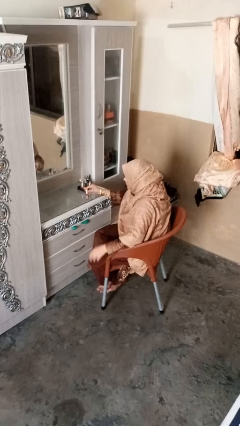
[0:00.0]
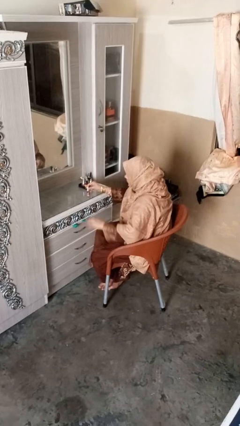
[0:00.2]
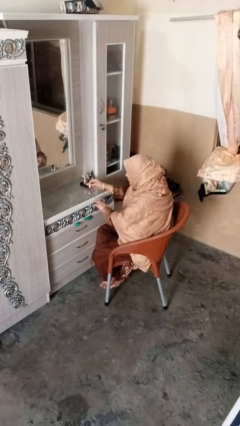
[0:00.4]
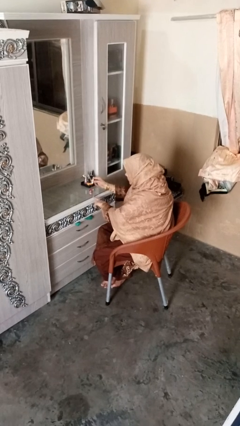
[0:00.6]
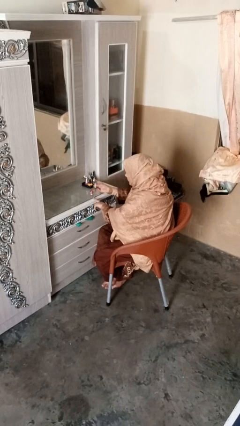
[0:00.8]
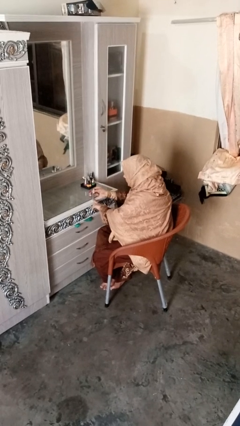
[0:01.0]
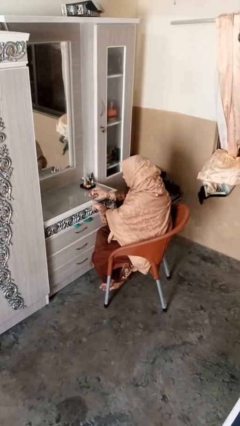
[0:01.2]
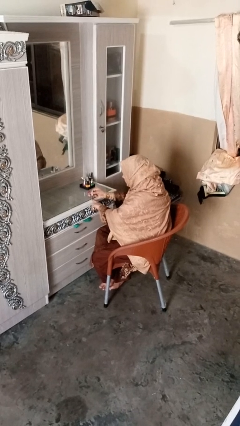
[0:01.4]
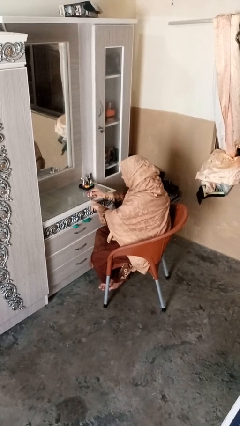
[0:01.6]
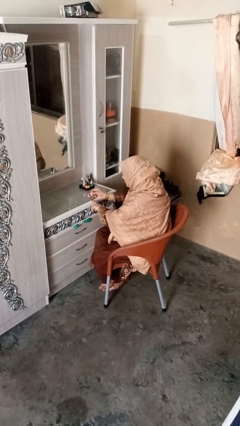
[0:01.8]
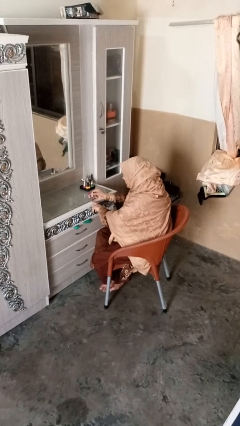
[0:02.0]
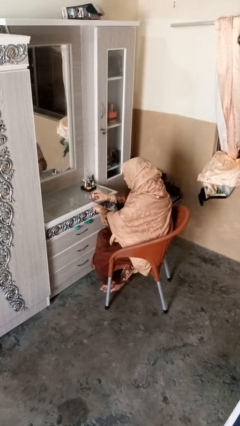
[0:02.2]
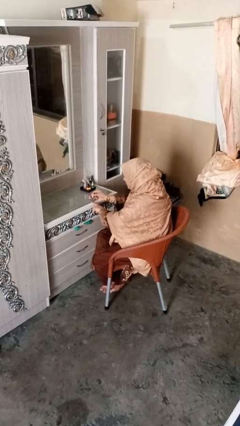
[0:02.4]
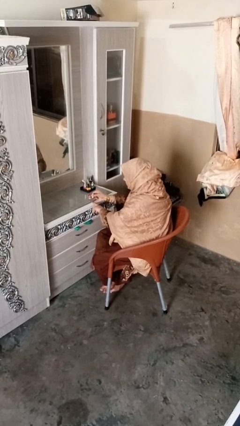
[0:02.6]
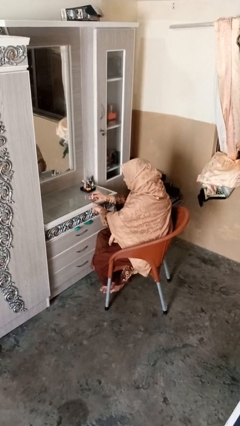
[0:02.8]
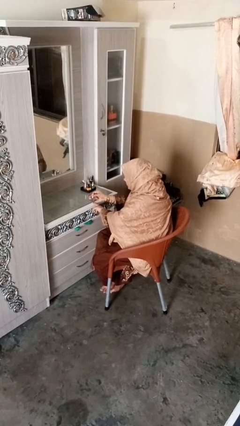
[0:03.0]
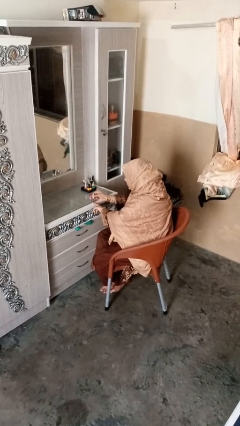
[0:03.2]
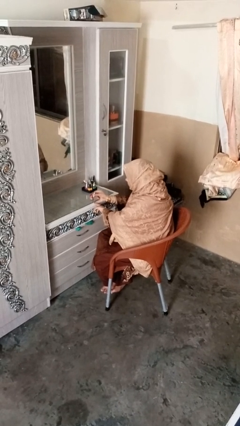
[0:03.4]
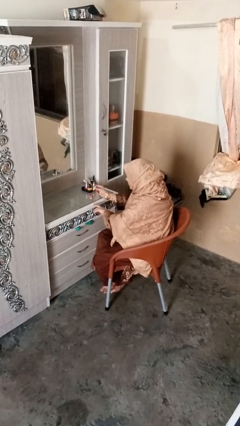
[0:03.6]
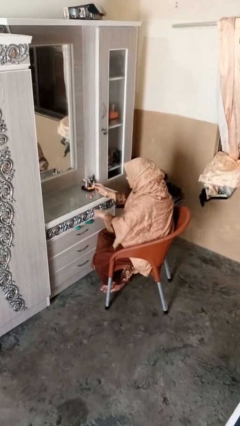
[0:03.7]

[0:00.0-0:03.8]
person paints fingernails

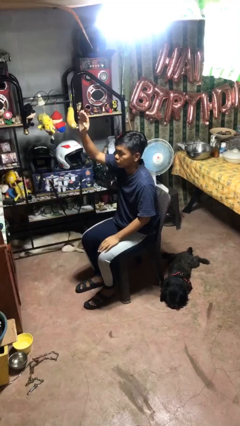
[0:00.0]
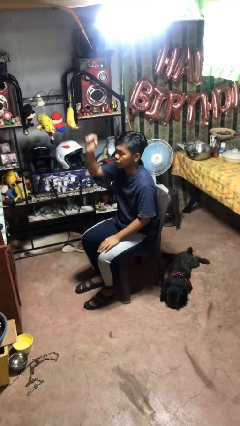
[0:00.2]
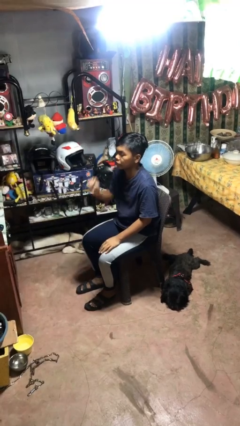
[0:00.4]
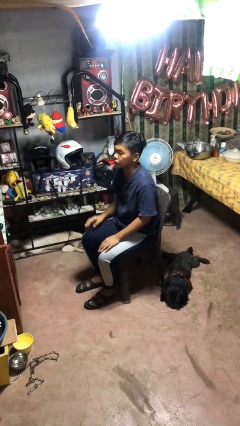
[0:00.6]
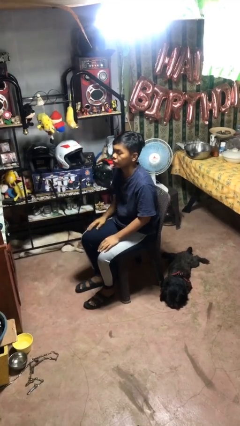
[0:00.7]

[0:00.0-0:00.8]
person gestures lower hand

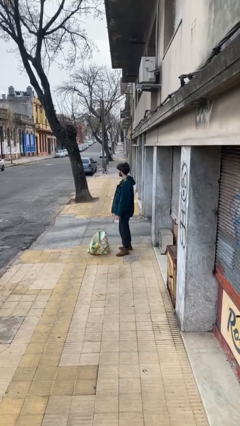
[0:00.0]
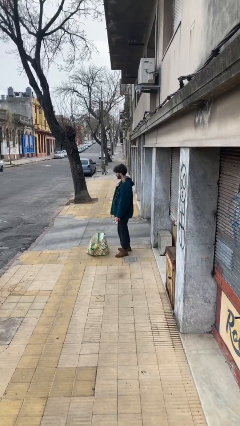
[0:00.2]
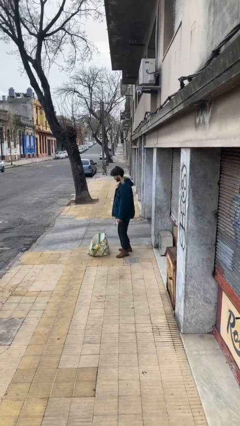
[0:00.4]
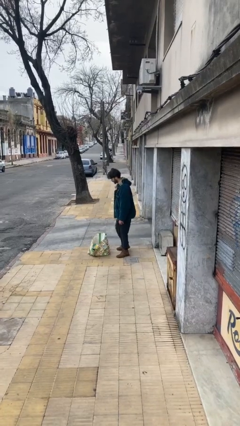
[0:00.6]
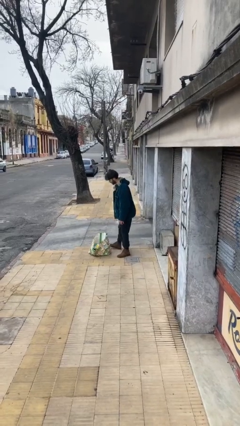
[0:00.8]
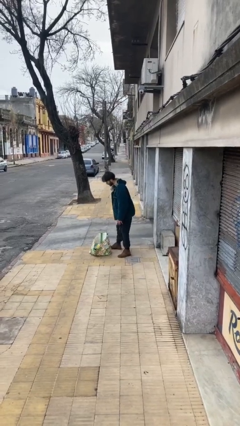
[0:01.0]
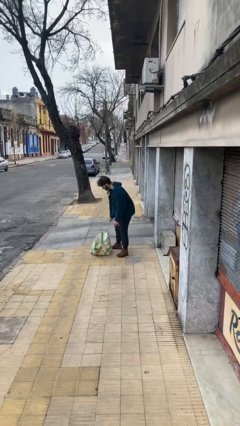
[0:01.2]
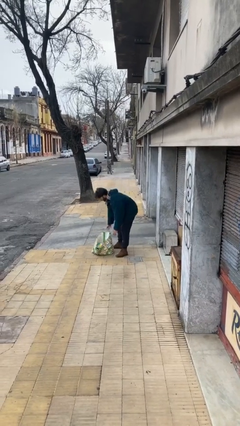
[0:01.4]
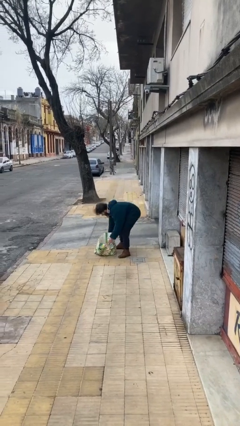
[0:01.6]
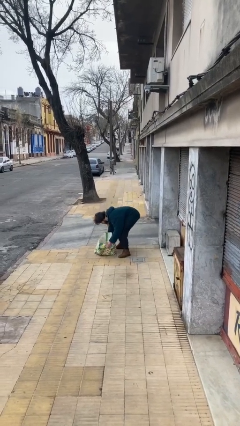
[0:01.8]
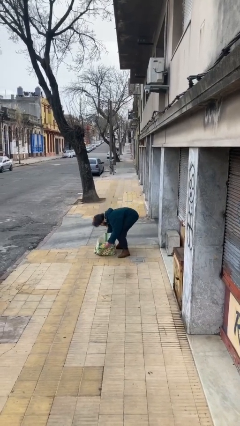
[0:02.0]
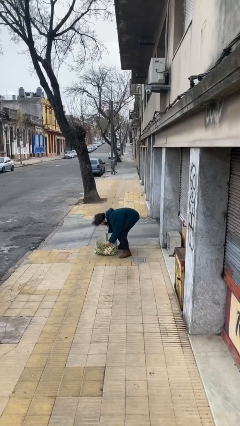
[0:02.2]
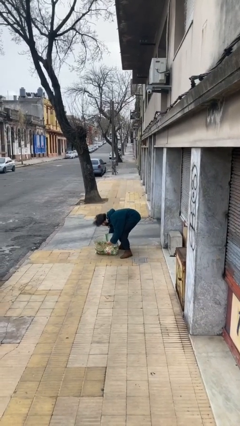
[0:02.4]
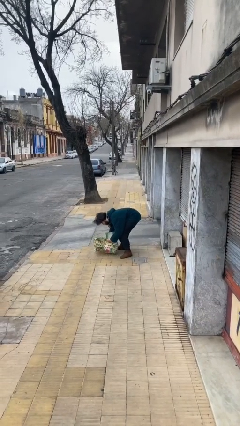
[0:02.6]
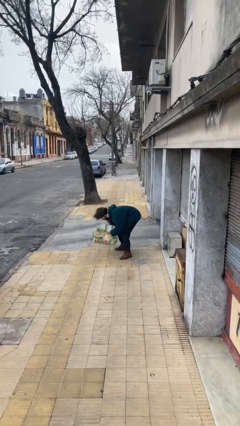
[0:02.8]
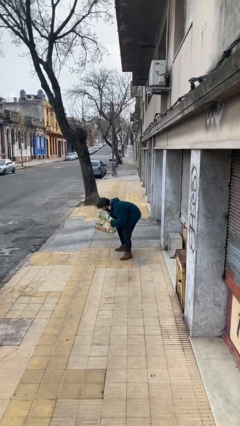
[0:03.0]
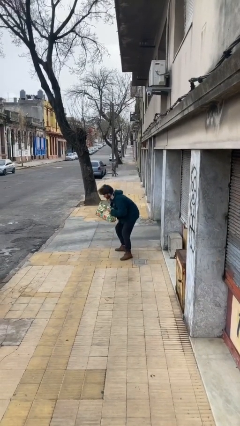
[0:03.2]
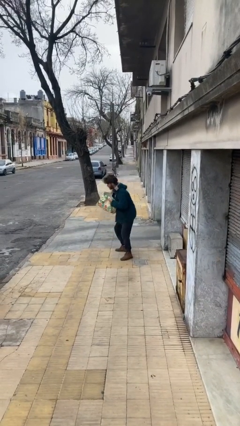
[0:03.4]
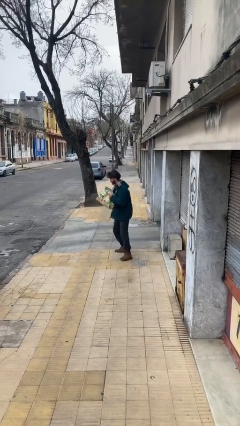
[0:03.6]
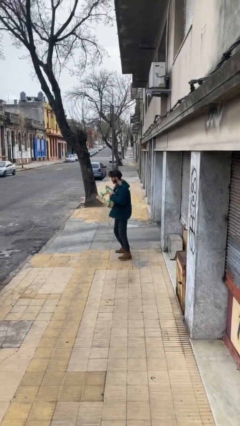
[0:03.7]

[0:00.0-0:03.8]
person picks up object from floor

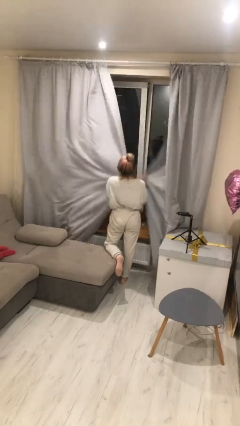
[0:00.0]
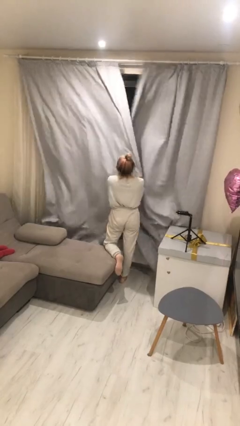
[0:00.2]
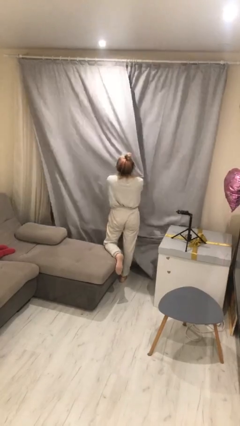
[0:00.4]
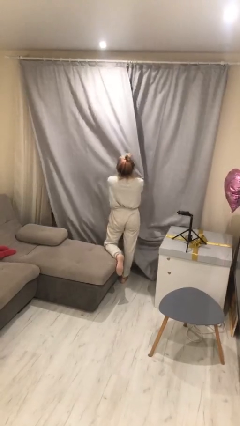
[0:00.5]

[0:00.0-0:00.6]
person closes curtains

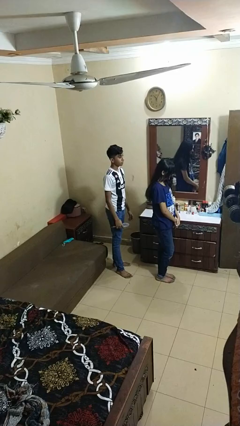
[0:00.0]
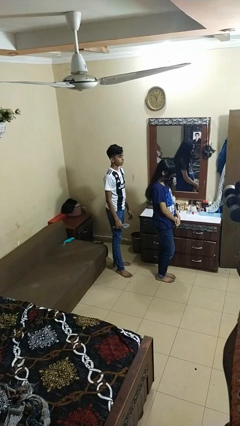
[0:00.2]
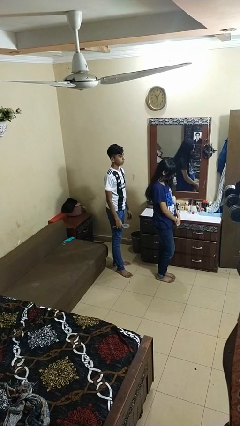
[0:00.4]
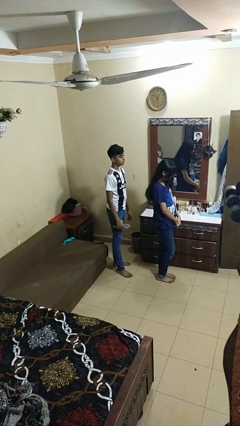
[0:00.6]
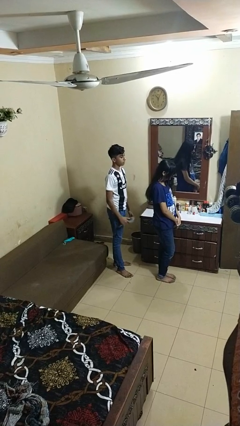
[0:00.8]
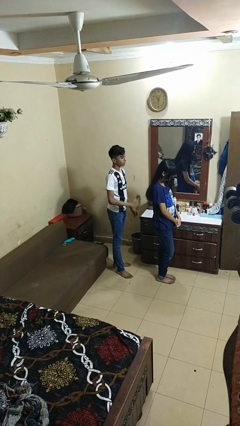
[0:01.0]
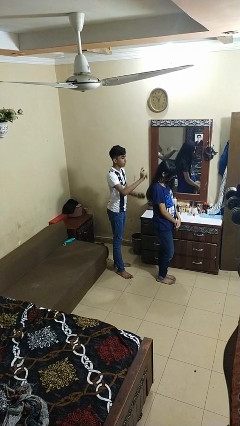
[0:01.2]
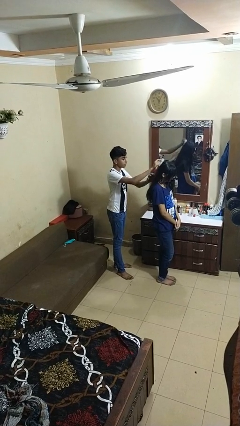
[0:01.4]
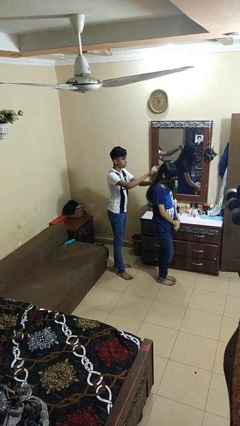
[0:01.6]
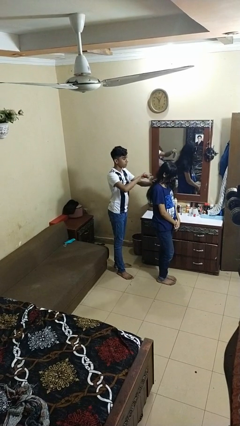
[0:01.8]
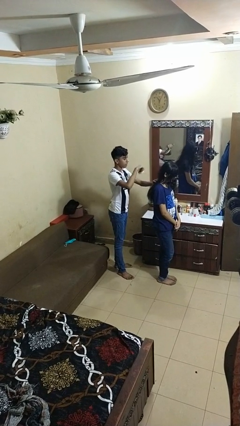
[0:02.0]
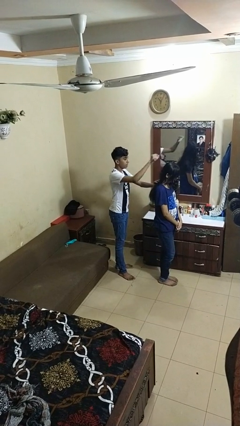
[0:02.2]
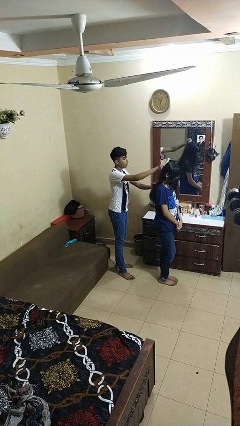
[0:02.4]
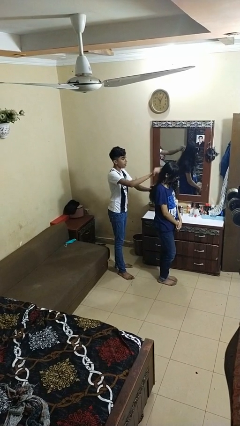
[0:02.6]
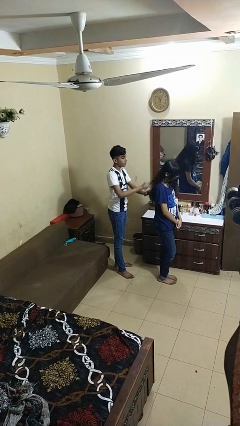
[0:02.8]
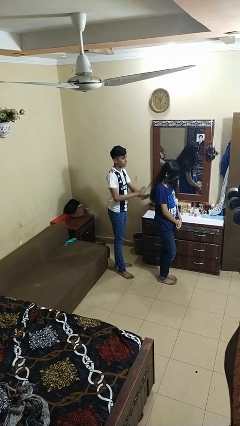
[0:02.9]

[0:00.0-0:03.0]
person brushes hair of person

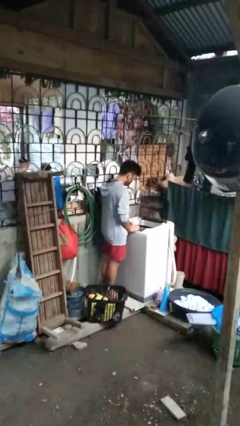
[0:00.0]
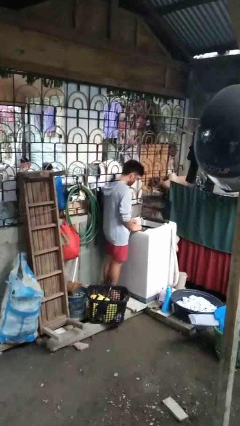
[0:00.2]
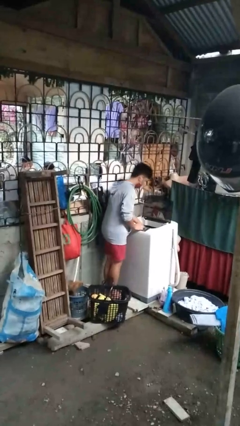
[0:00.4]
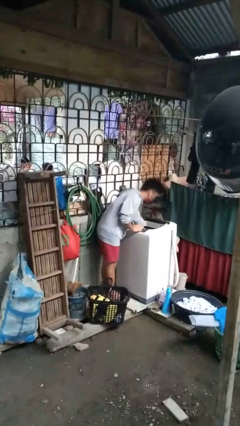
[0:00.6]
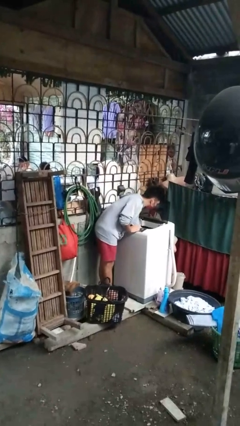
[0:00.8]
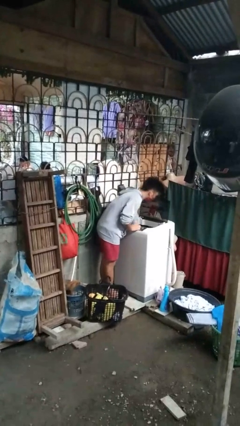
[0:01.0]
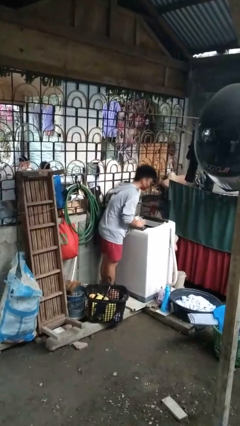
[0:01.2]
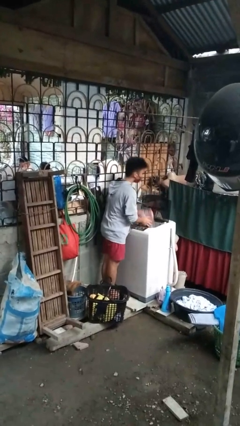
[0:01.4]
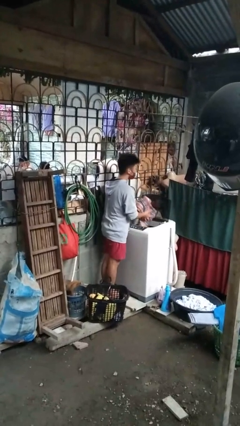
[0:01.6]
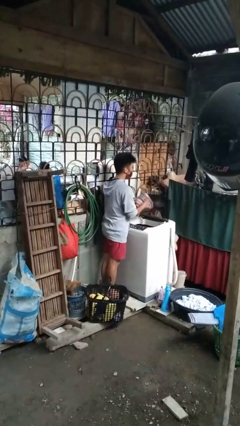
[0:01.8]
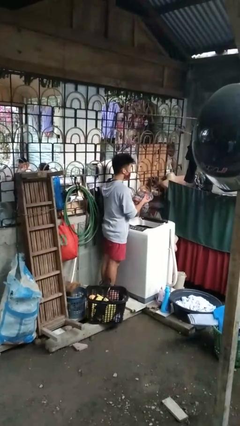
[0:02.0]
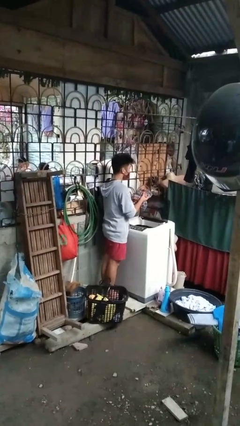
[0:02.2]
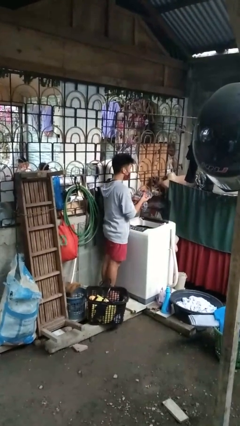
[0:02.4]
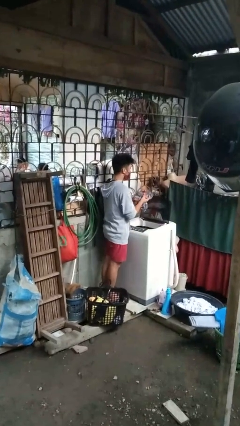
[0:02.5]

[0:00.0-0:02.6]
person unloads clotheswasher

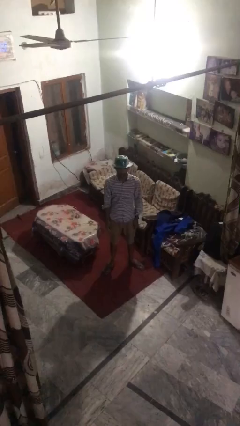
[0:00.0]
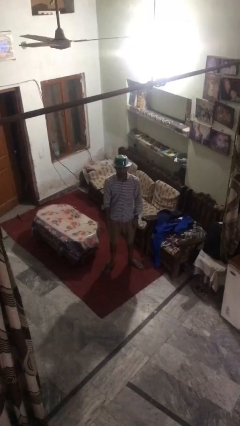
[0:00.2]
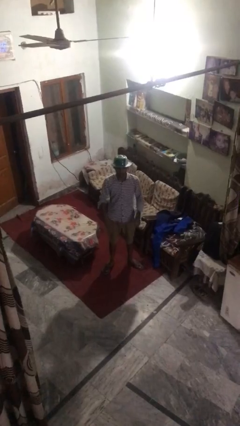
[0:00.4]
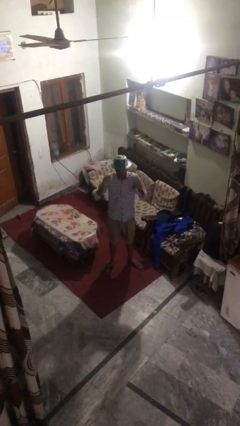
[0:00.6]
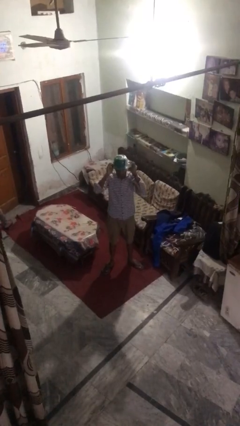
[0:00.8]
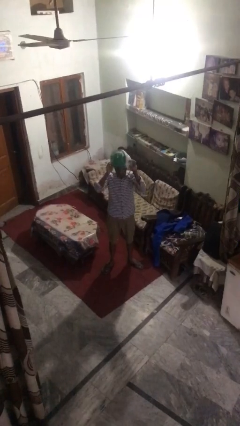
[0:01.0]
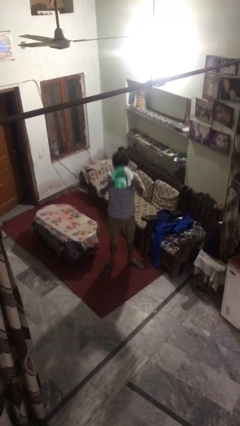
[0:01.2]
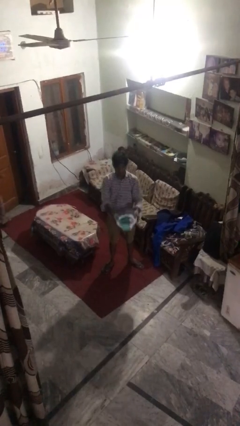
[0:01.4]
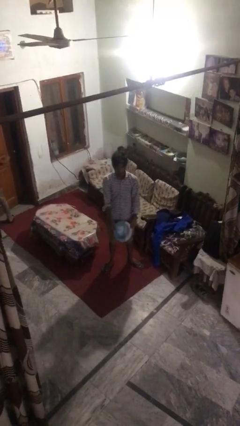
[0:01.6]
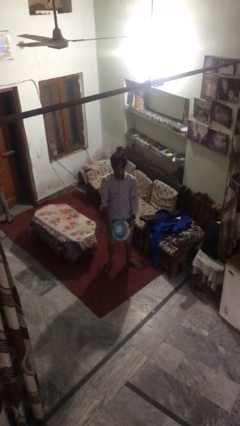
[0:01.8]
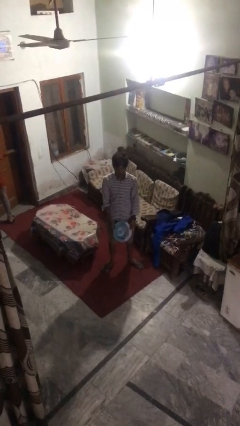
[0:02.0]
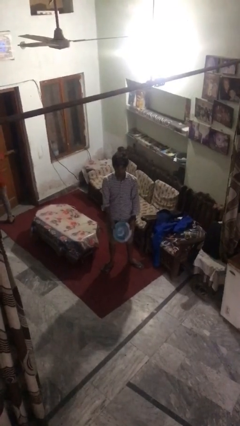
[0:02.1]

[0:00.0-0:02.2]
person takes off hat
